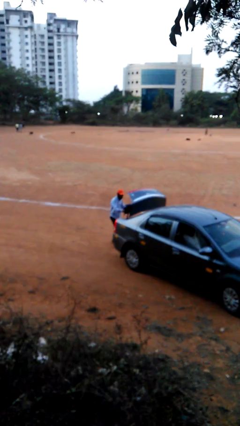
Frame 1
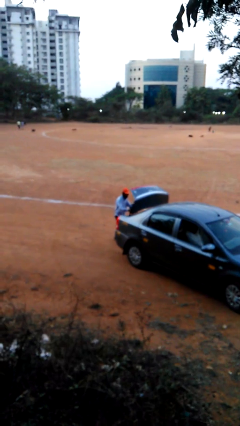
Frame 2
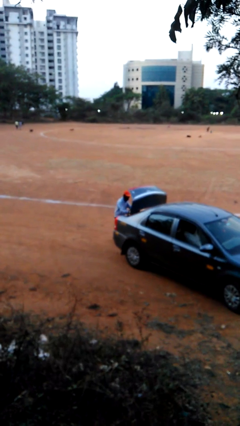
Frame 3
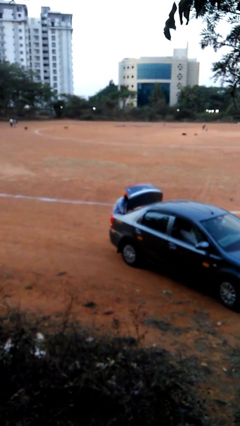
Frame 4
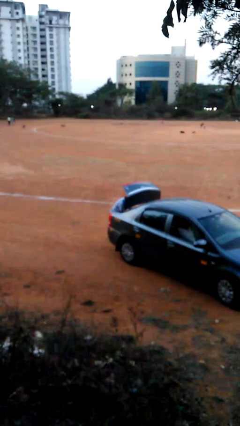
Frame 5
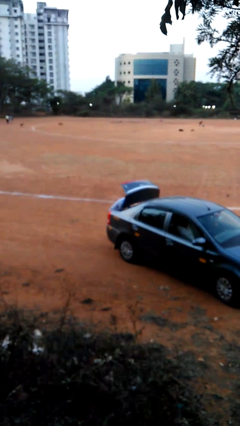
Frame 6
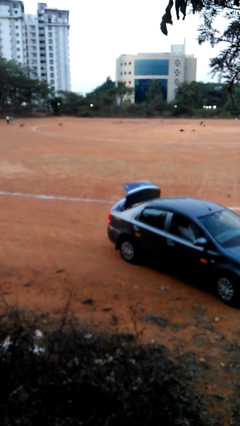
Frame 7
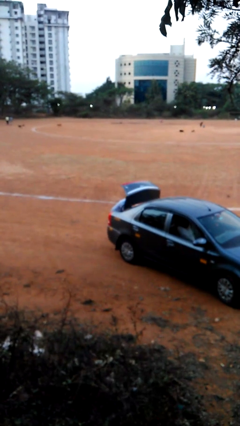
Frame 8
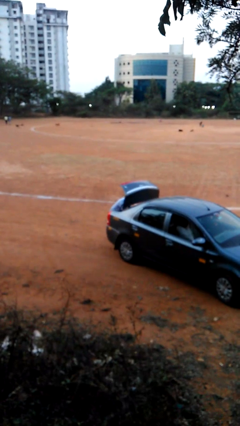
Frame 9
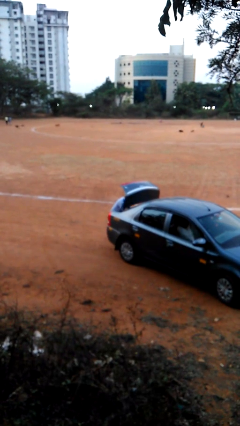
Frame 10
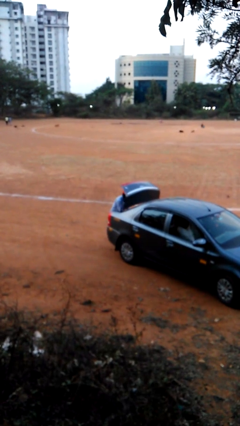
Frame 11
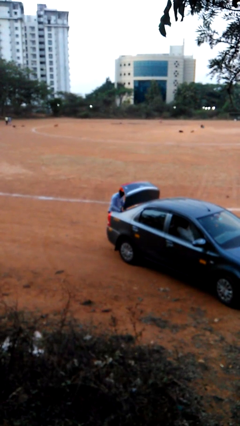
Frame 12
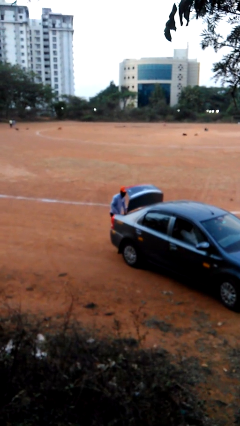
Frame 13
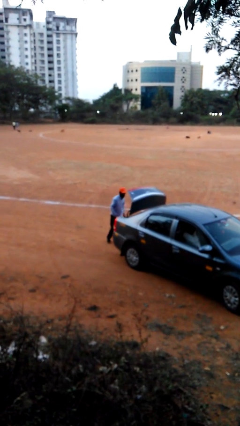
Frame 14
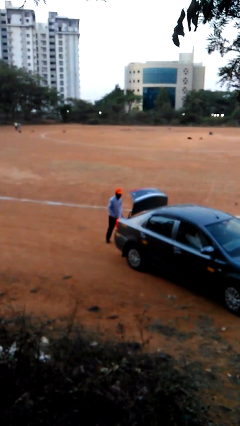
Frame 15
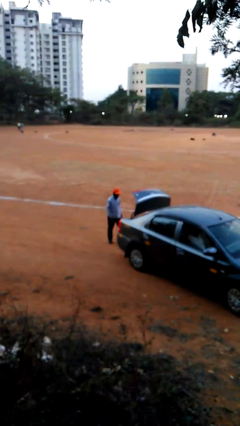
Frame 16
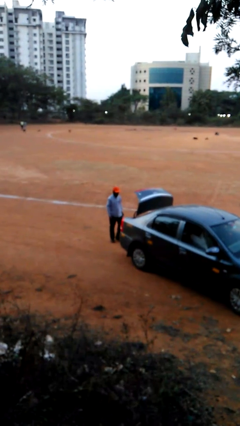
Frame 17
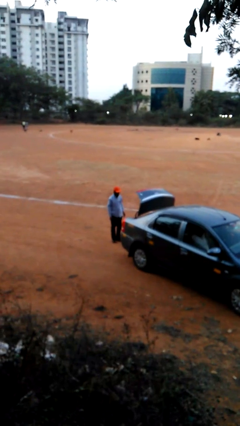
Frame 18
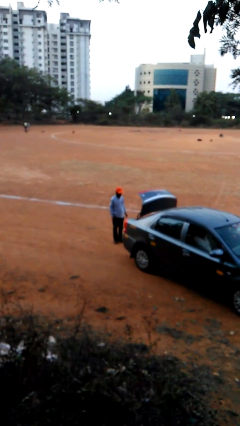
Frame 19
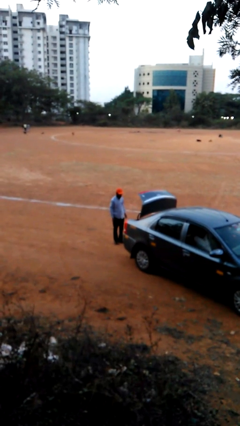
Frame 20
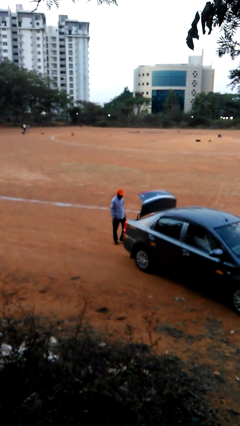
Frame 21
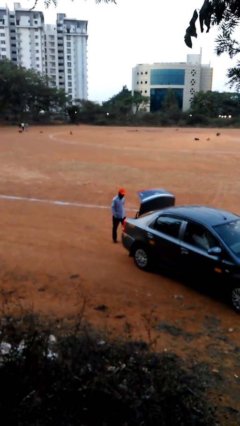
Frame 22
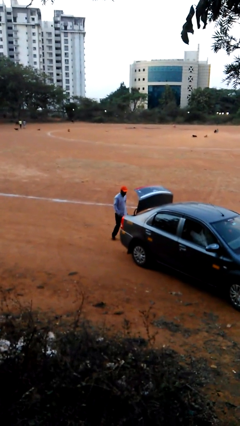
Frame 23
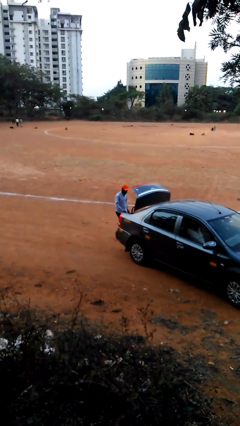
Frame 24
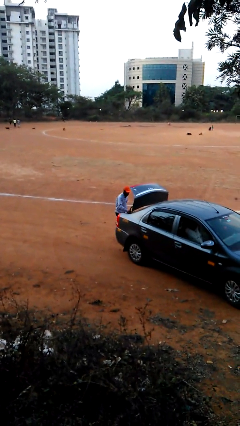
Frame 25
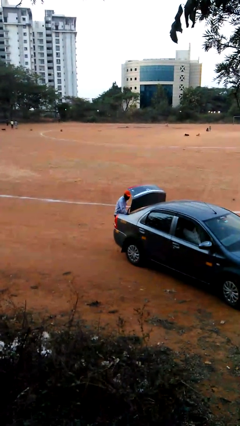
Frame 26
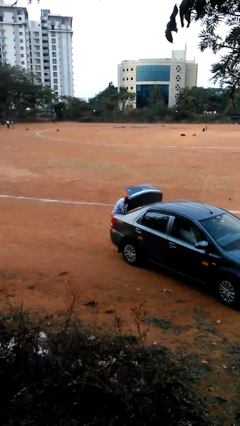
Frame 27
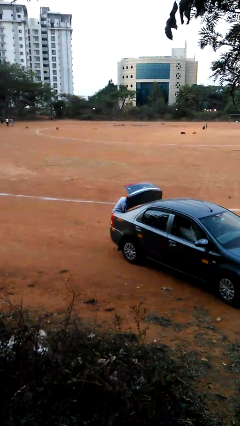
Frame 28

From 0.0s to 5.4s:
person loads car

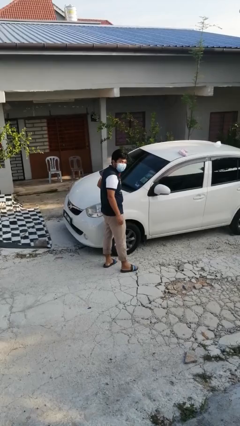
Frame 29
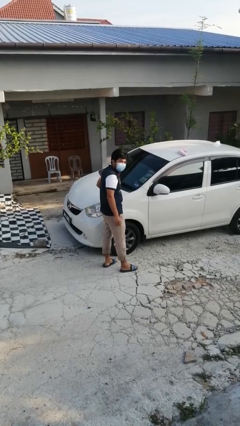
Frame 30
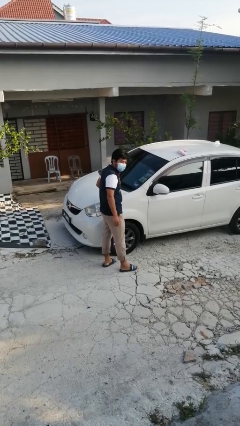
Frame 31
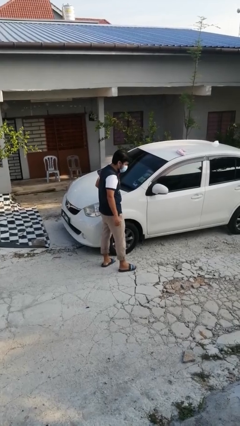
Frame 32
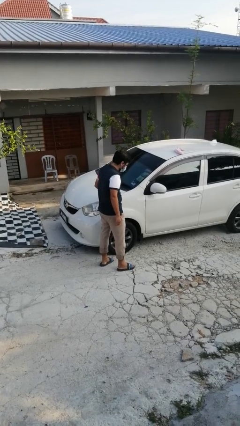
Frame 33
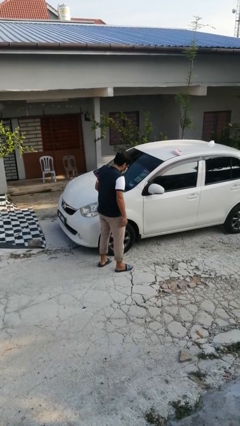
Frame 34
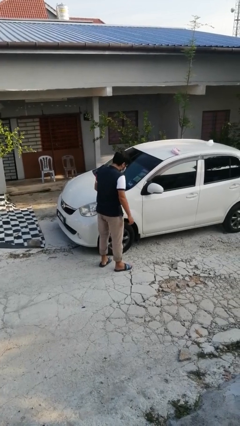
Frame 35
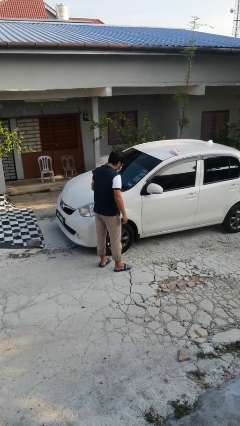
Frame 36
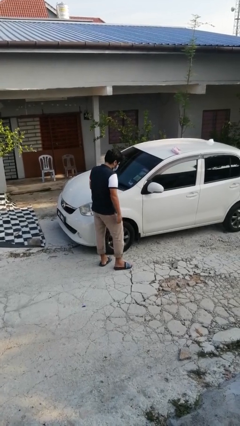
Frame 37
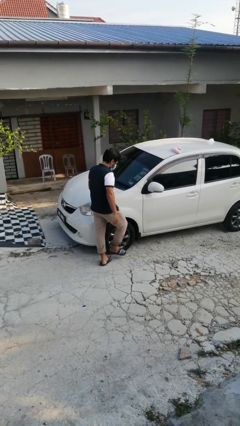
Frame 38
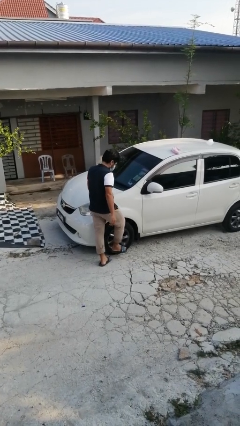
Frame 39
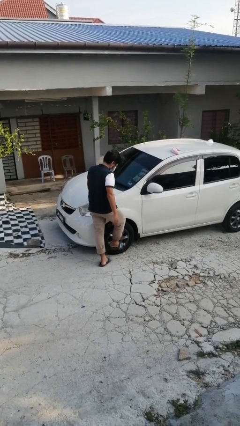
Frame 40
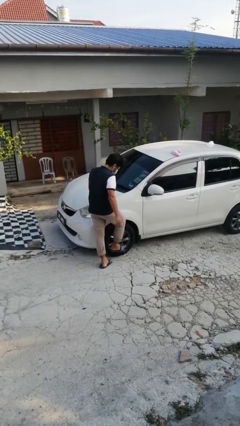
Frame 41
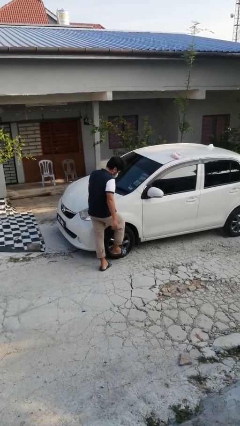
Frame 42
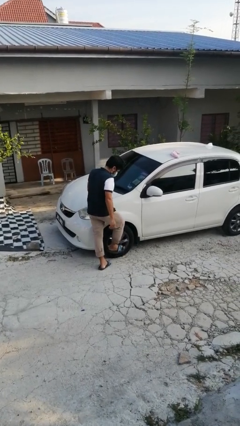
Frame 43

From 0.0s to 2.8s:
person kicks car tires

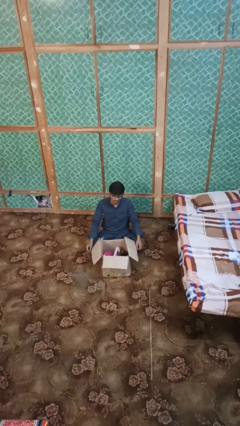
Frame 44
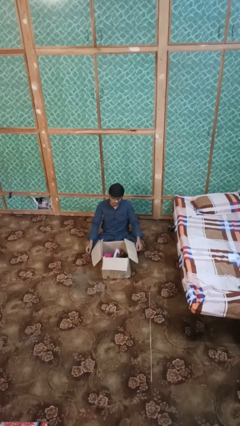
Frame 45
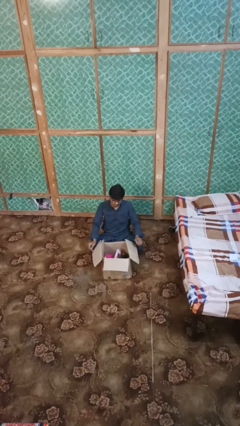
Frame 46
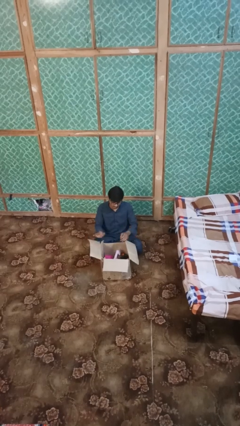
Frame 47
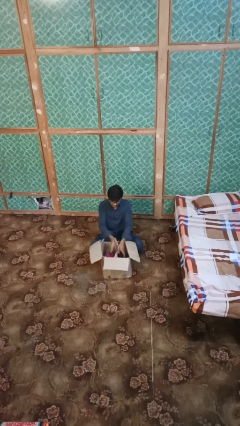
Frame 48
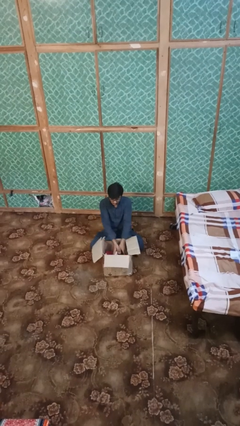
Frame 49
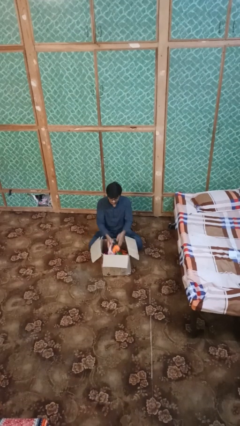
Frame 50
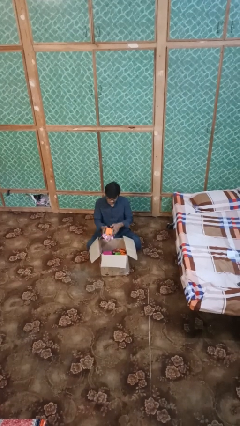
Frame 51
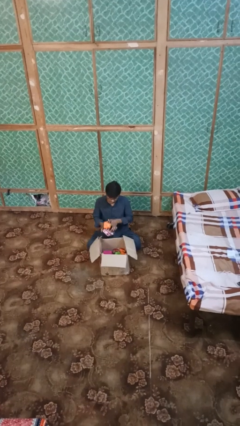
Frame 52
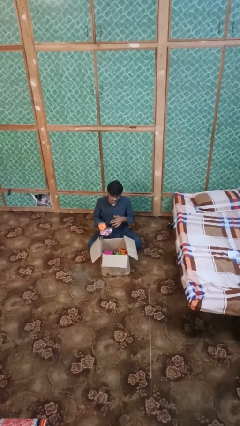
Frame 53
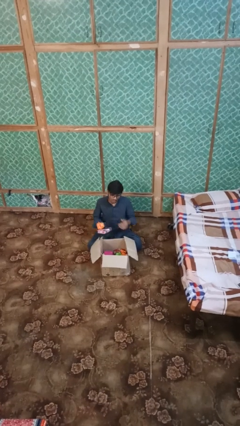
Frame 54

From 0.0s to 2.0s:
person takes object from box

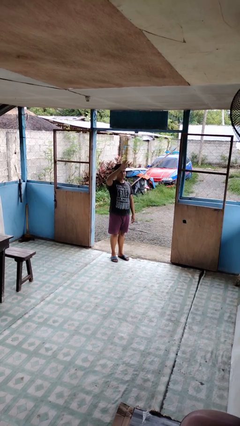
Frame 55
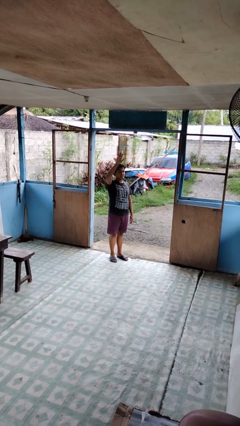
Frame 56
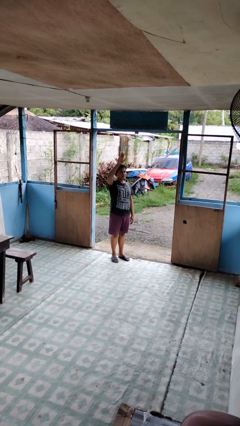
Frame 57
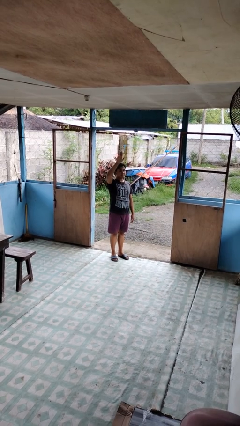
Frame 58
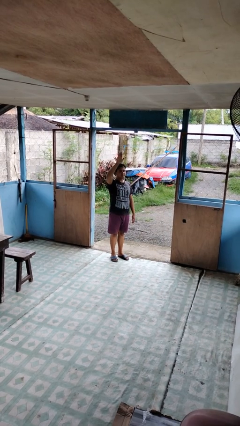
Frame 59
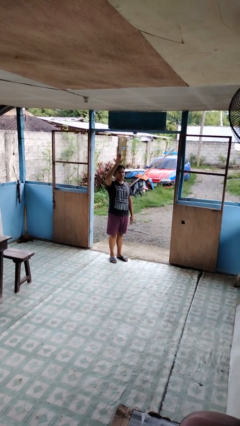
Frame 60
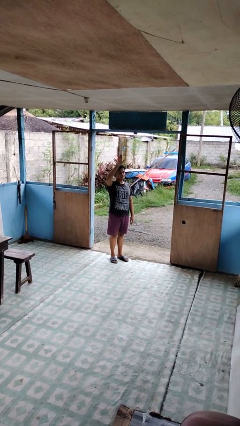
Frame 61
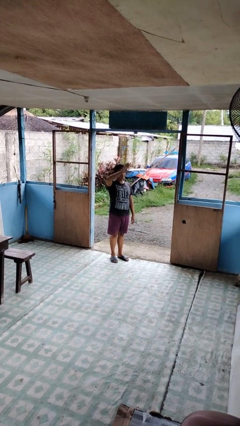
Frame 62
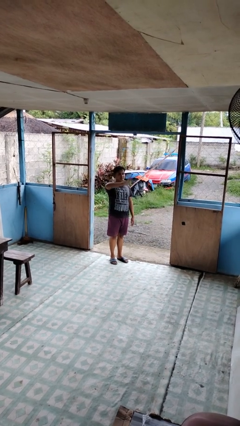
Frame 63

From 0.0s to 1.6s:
person gestures swipe up

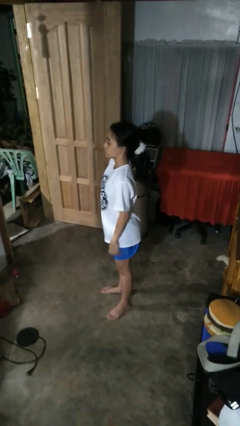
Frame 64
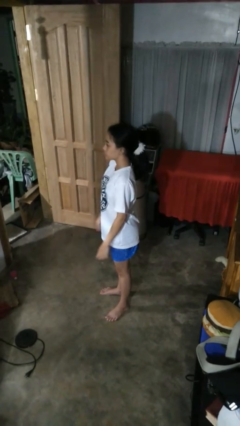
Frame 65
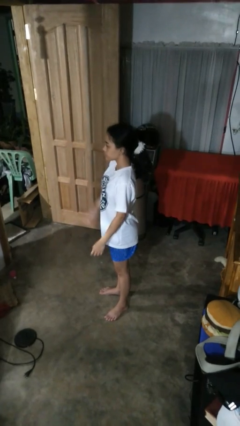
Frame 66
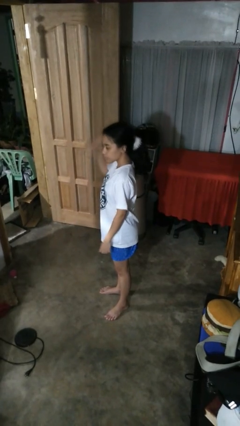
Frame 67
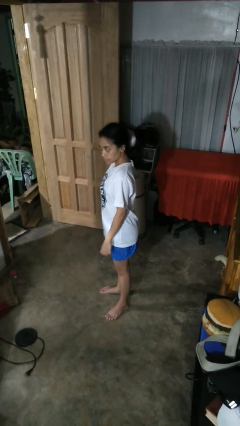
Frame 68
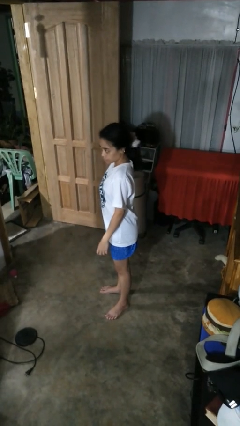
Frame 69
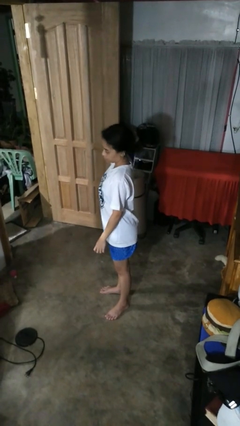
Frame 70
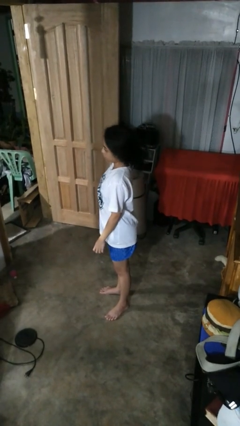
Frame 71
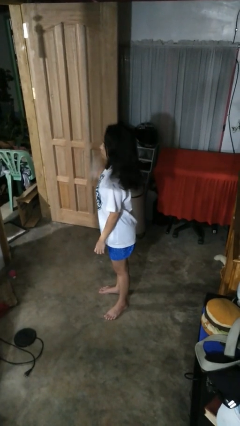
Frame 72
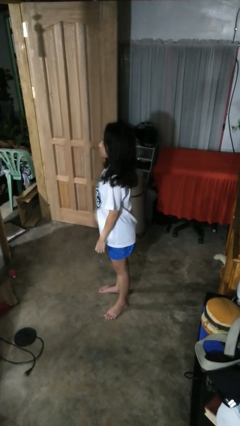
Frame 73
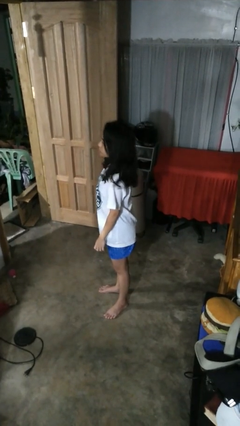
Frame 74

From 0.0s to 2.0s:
person takes off hairtie

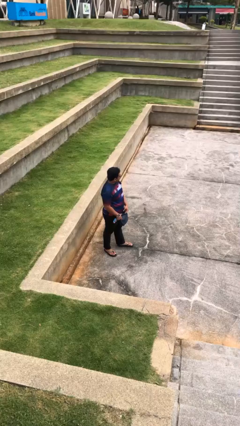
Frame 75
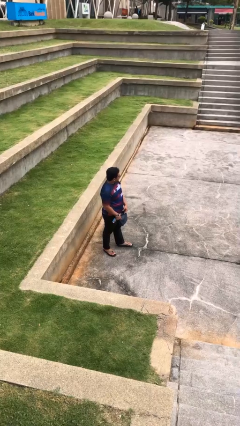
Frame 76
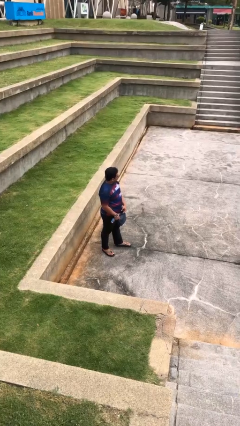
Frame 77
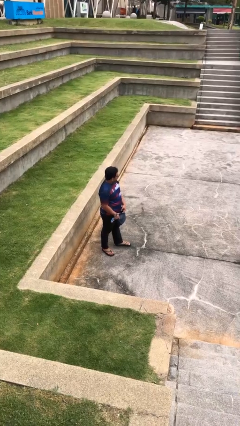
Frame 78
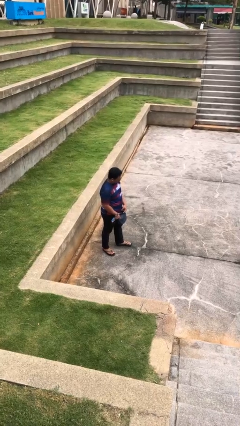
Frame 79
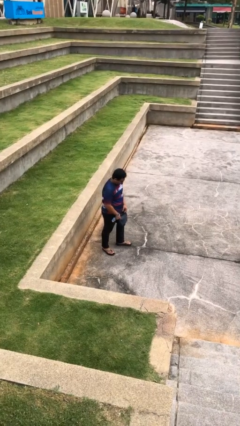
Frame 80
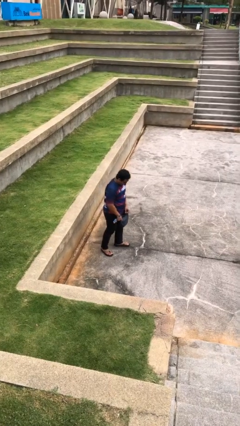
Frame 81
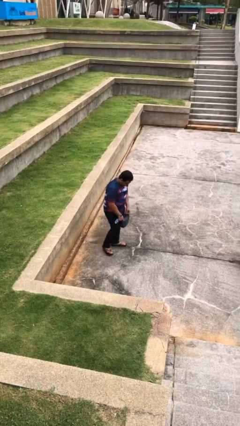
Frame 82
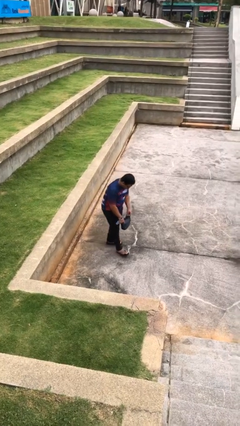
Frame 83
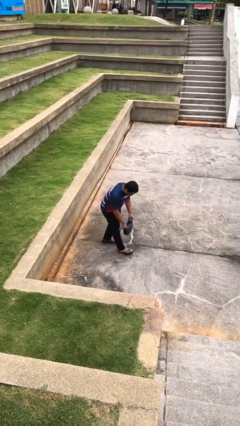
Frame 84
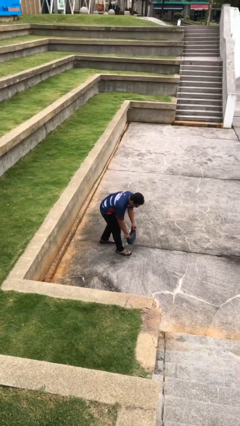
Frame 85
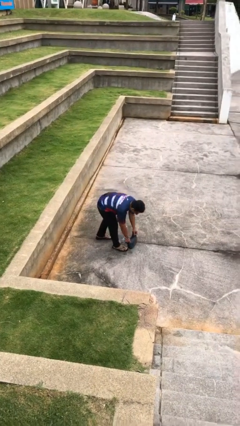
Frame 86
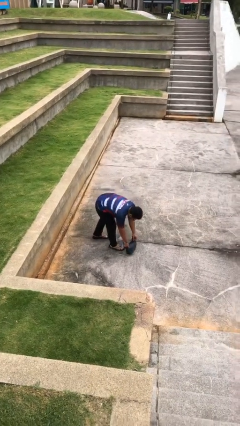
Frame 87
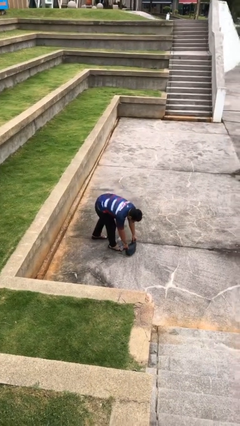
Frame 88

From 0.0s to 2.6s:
person puts down object on floor

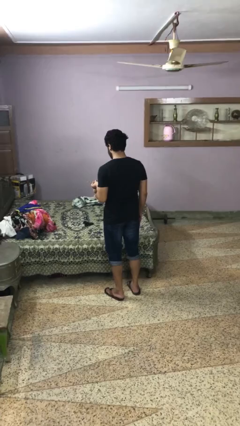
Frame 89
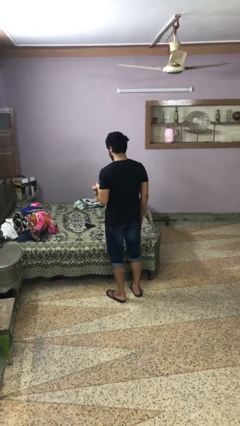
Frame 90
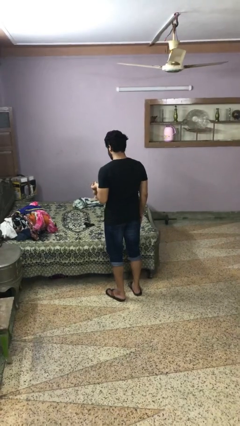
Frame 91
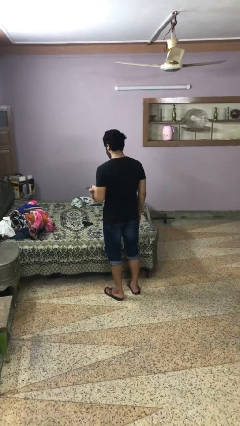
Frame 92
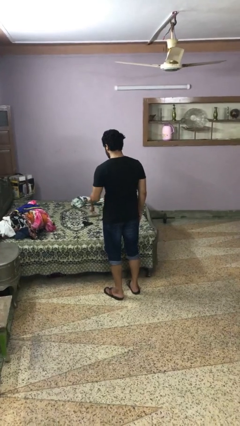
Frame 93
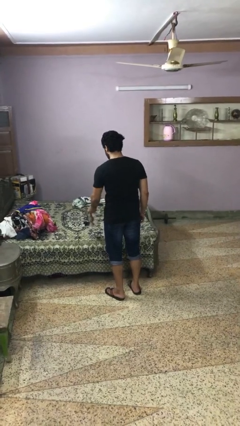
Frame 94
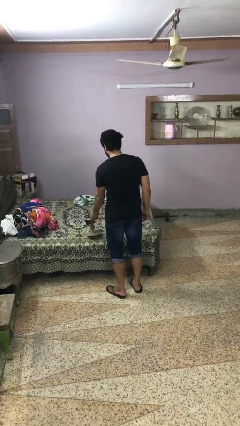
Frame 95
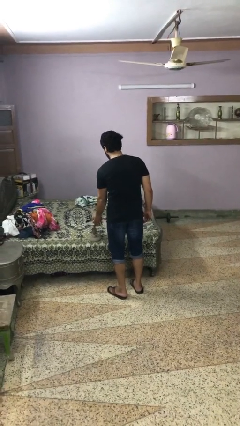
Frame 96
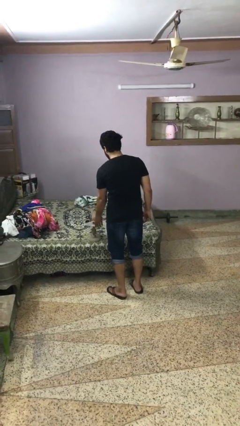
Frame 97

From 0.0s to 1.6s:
person puts down object on bed
